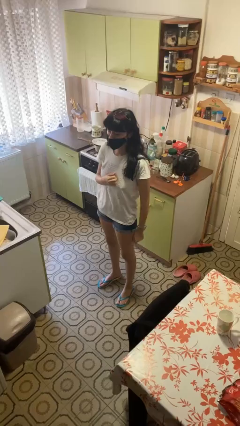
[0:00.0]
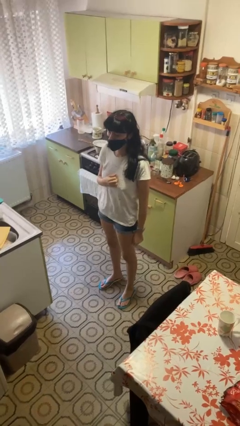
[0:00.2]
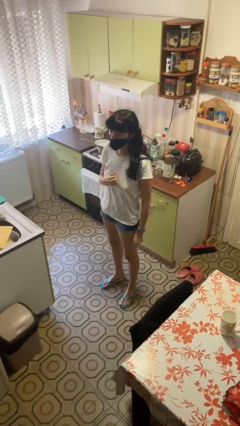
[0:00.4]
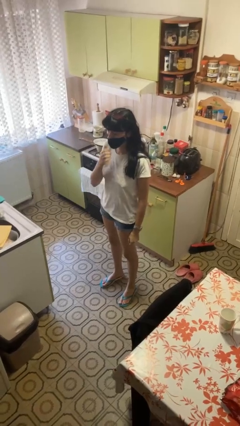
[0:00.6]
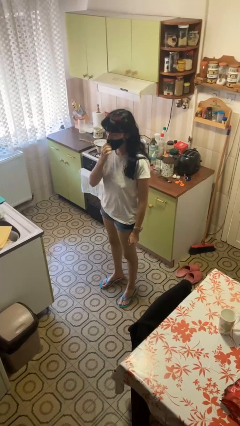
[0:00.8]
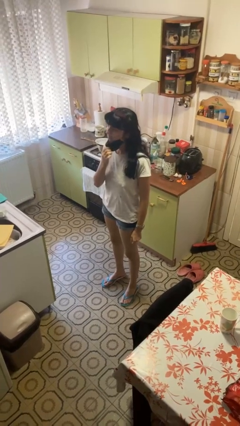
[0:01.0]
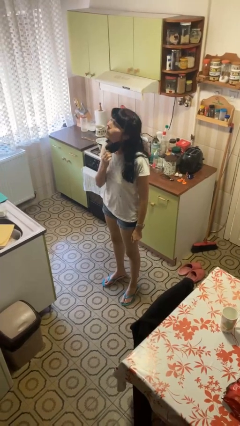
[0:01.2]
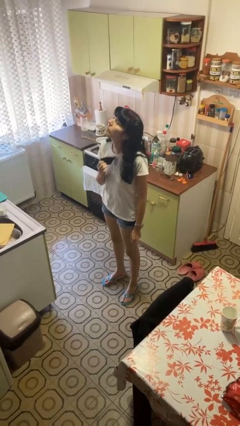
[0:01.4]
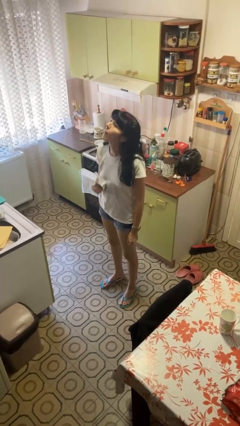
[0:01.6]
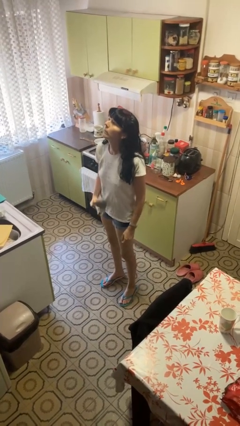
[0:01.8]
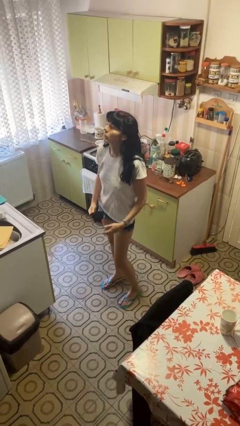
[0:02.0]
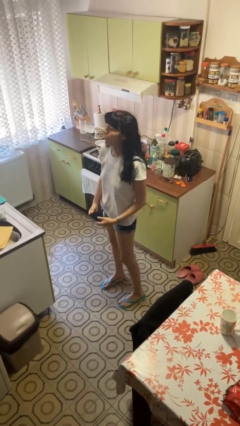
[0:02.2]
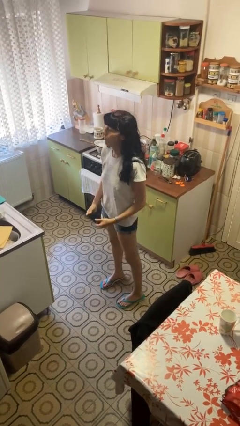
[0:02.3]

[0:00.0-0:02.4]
person takes off facemask

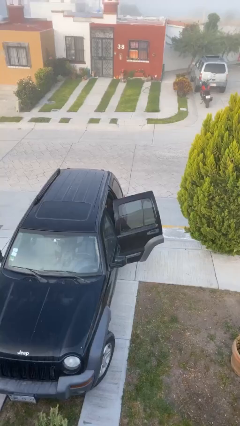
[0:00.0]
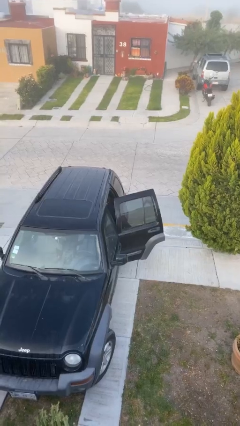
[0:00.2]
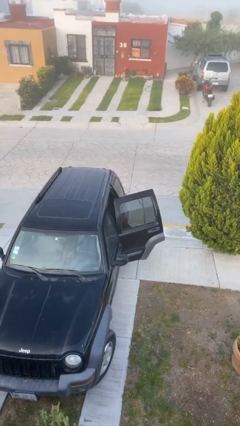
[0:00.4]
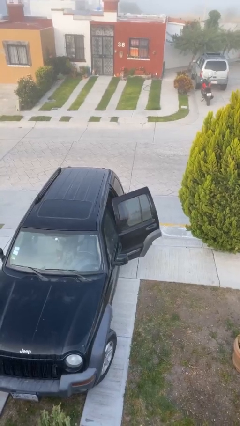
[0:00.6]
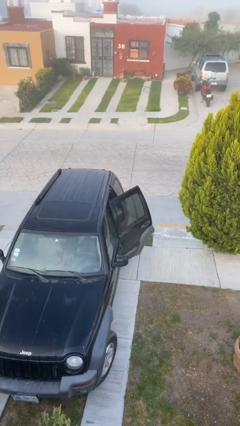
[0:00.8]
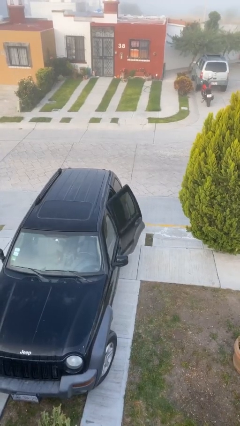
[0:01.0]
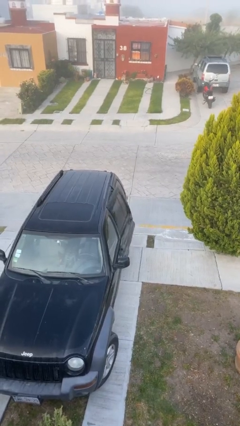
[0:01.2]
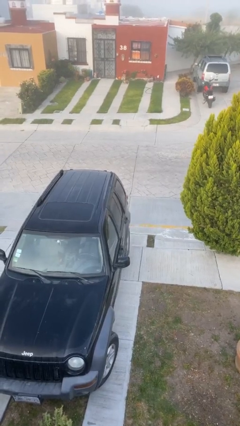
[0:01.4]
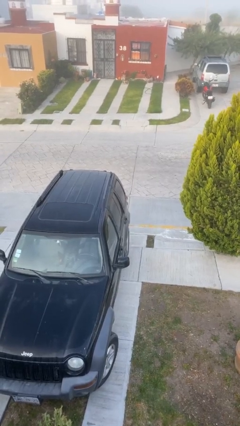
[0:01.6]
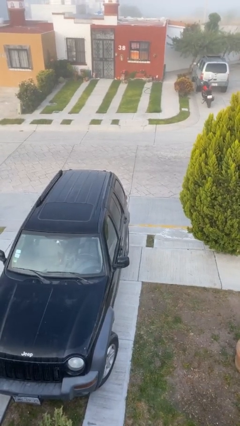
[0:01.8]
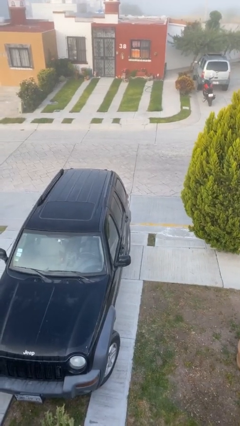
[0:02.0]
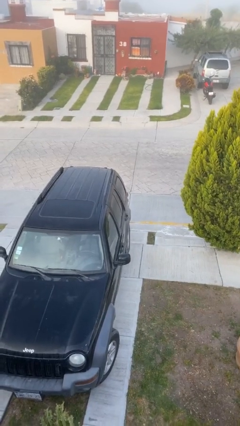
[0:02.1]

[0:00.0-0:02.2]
person closes car door

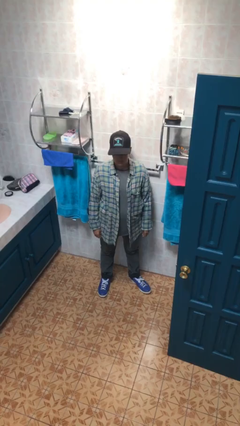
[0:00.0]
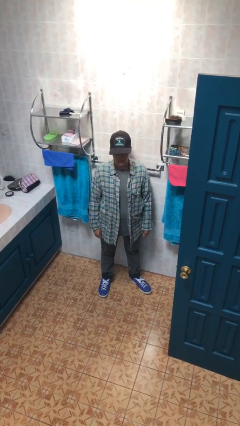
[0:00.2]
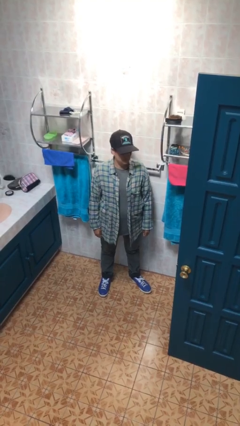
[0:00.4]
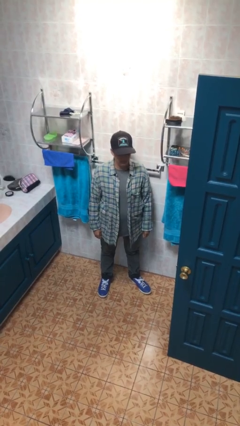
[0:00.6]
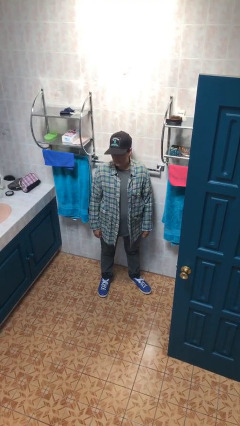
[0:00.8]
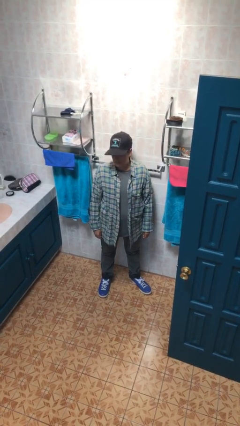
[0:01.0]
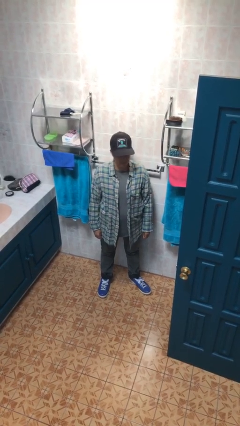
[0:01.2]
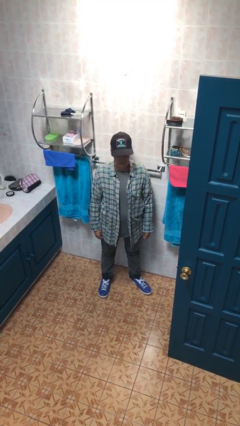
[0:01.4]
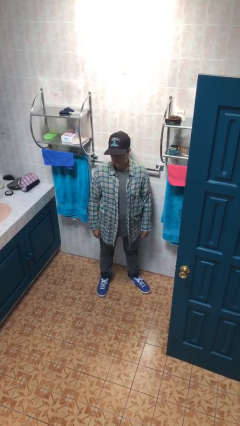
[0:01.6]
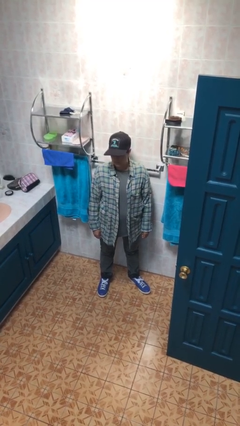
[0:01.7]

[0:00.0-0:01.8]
person shakes head

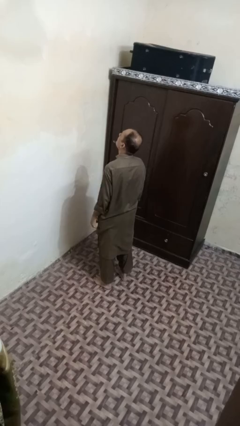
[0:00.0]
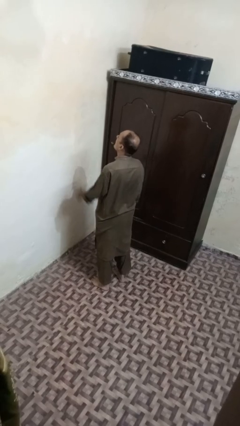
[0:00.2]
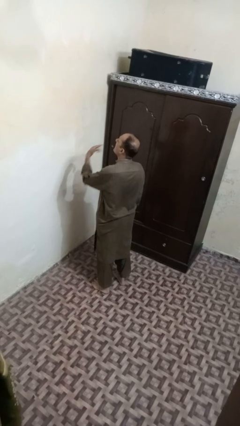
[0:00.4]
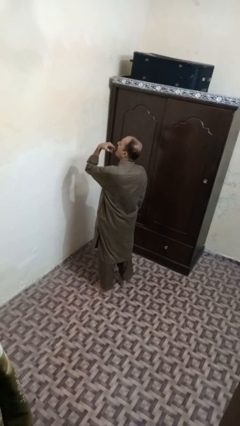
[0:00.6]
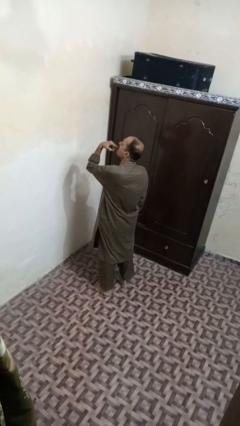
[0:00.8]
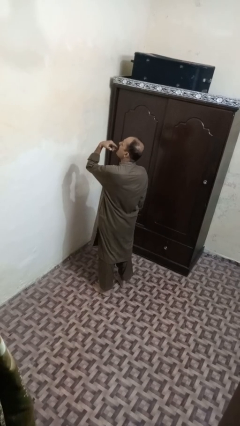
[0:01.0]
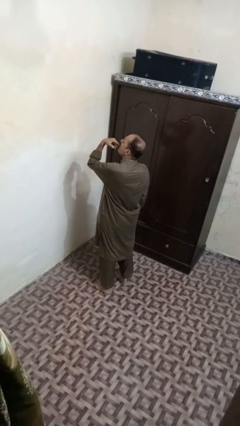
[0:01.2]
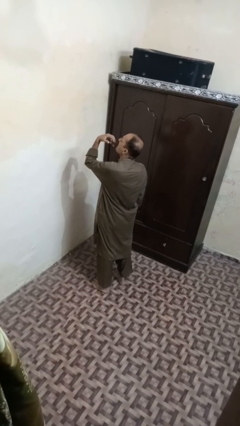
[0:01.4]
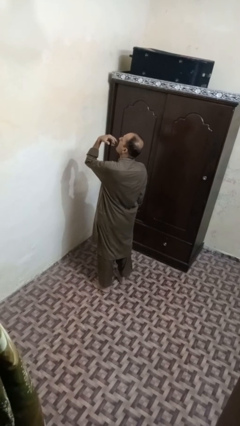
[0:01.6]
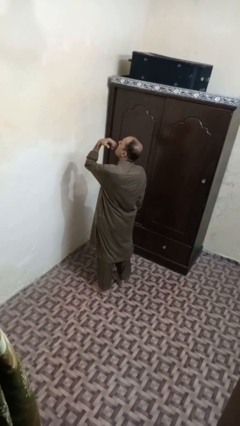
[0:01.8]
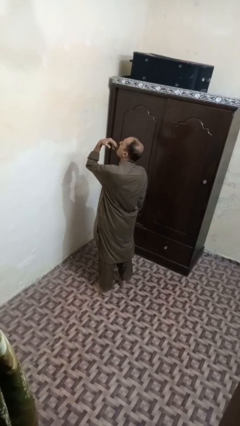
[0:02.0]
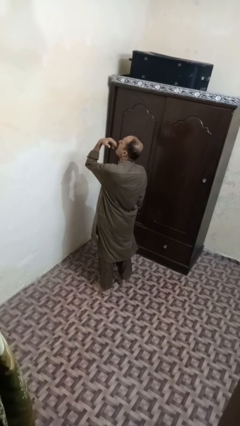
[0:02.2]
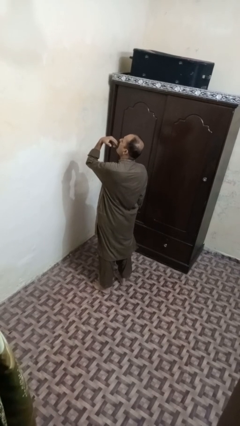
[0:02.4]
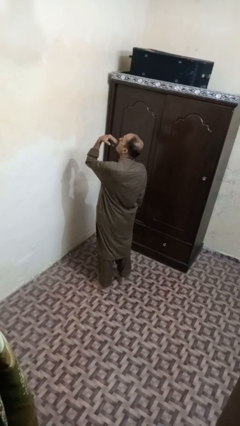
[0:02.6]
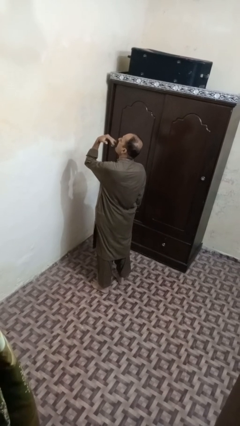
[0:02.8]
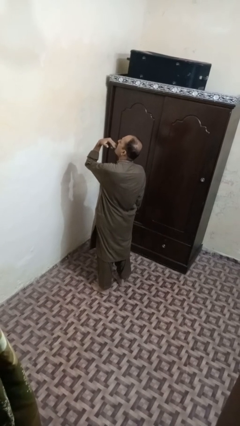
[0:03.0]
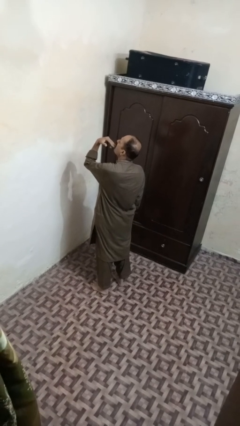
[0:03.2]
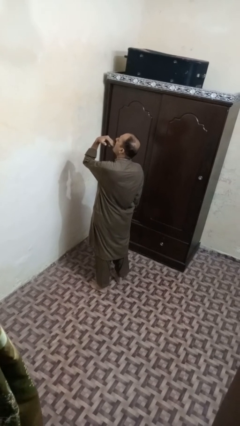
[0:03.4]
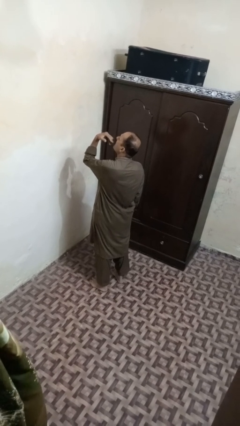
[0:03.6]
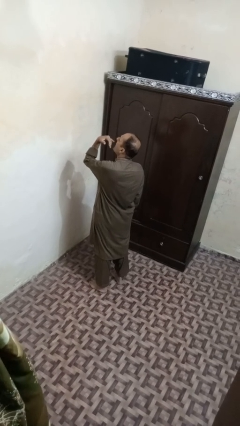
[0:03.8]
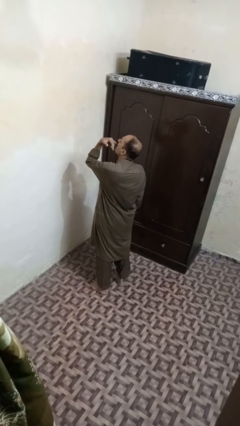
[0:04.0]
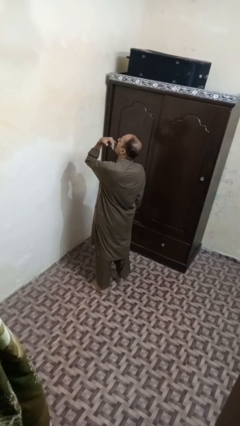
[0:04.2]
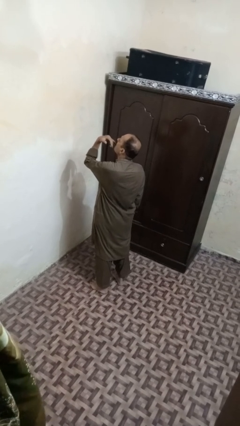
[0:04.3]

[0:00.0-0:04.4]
person licks fingers

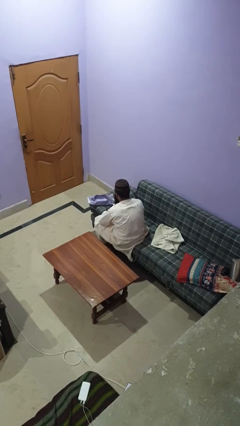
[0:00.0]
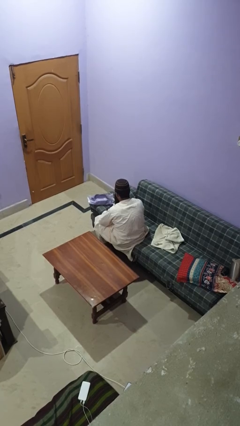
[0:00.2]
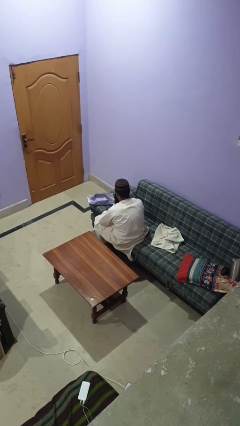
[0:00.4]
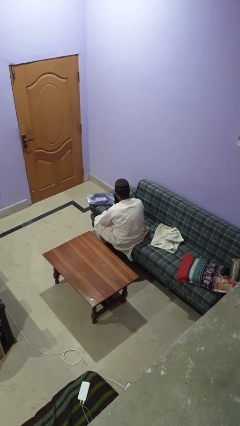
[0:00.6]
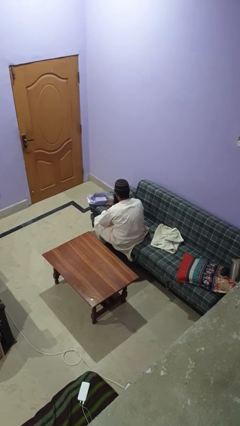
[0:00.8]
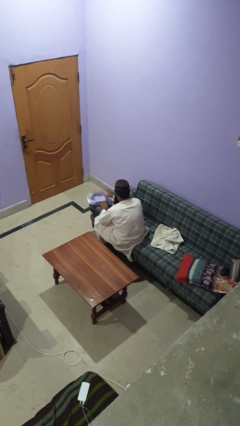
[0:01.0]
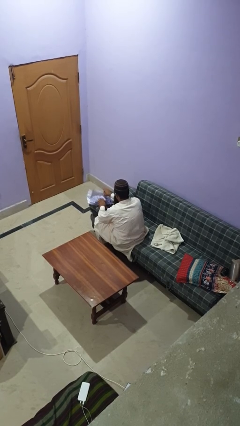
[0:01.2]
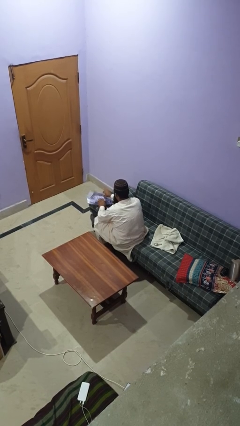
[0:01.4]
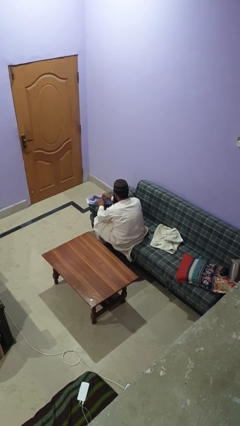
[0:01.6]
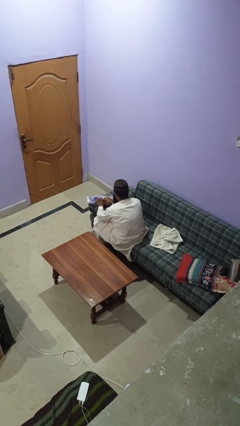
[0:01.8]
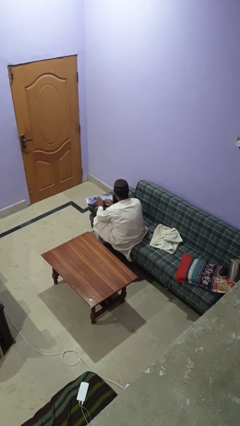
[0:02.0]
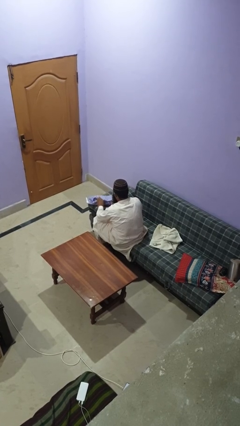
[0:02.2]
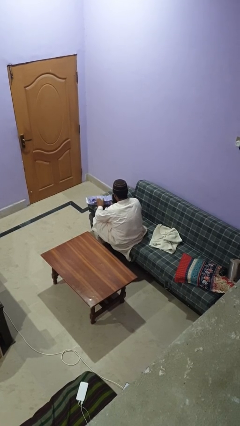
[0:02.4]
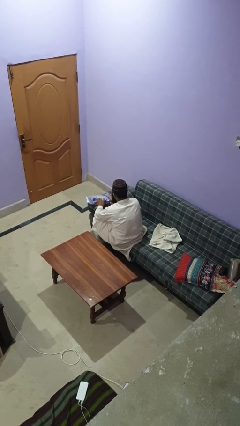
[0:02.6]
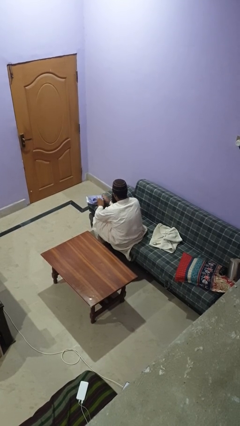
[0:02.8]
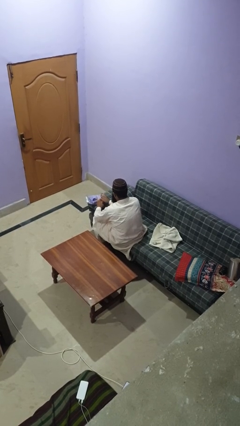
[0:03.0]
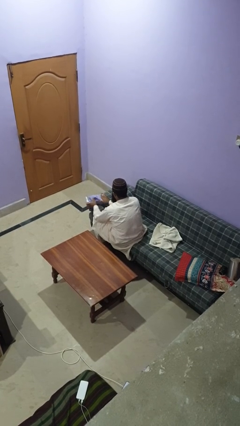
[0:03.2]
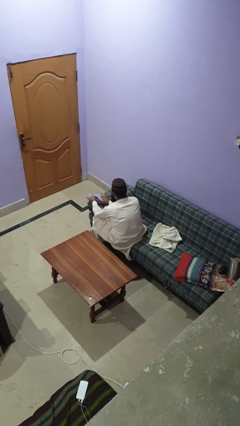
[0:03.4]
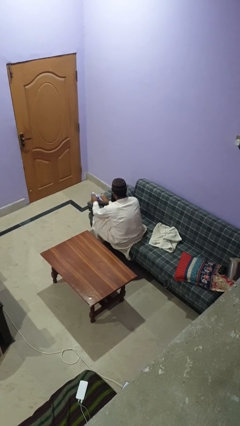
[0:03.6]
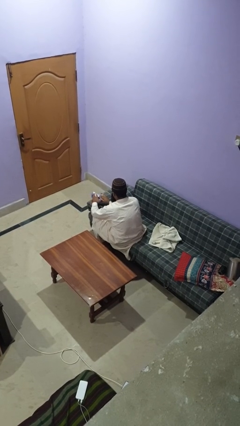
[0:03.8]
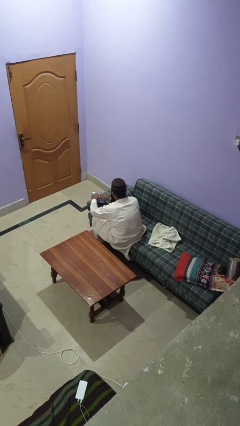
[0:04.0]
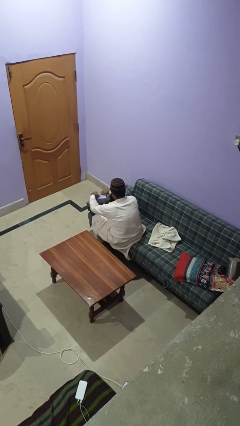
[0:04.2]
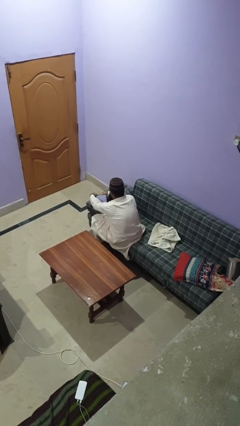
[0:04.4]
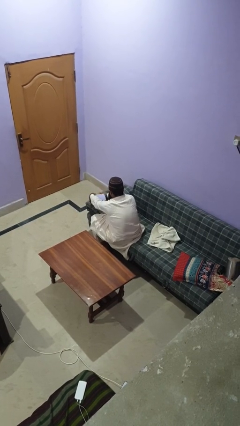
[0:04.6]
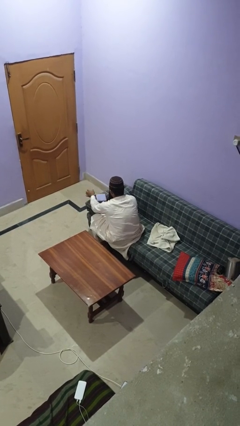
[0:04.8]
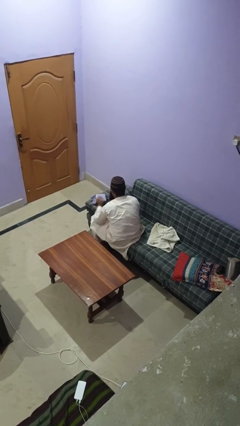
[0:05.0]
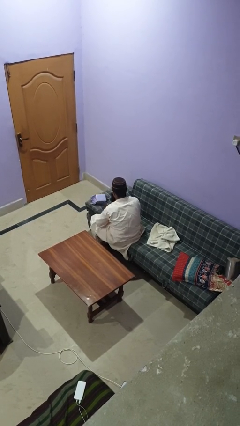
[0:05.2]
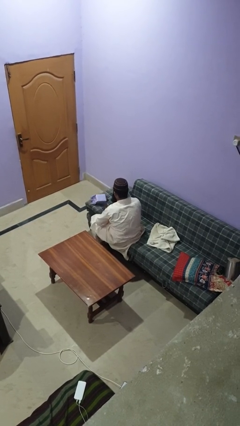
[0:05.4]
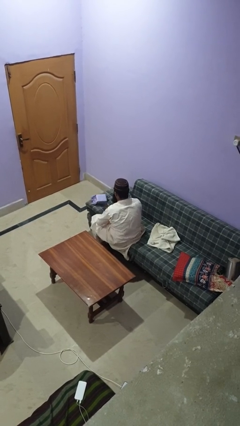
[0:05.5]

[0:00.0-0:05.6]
person wraps box

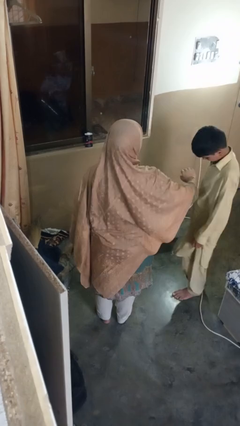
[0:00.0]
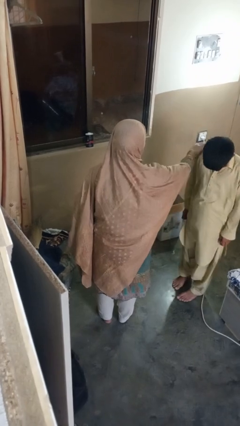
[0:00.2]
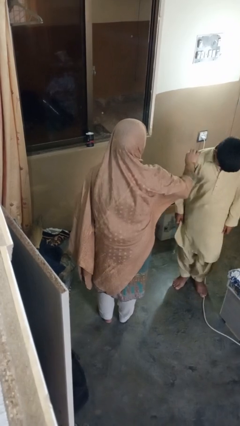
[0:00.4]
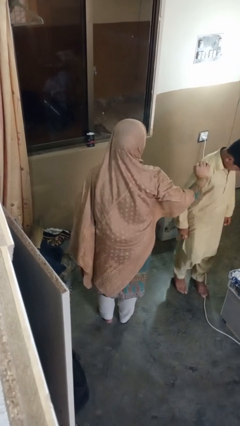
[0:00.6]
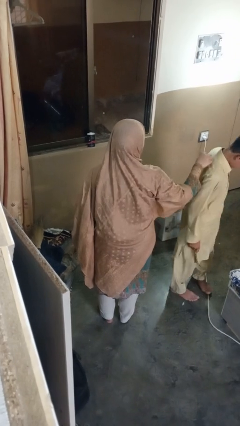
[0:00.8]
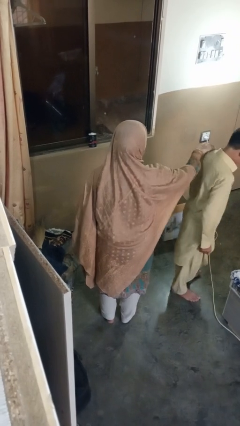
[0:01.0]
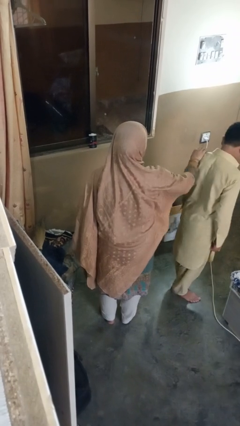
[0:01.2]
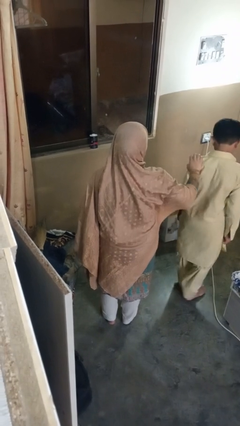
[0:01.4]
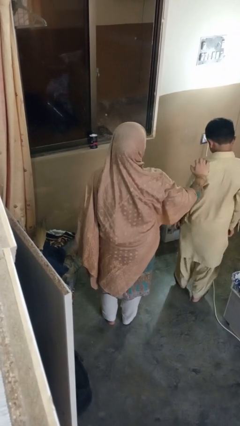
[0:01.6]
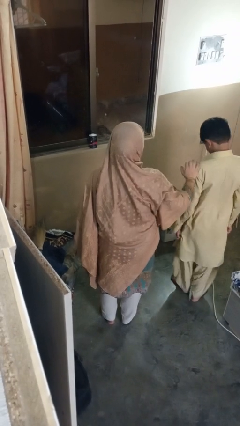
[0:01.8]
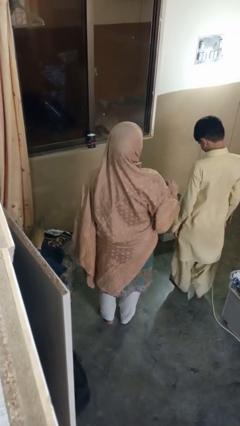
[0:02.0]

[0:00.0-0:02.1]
person spins person around
